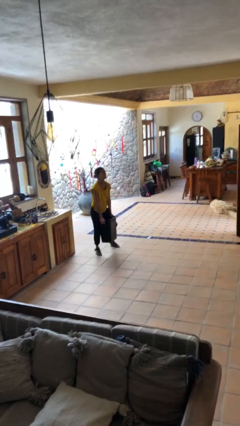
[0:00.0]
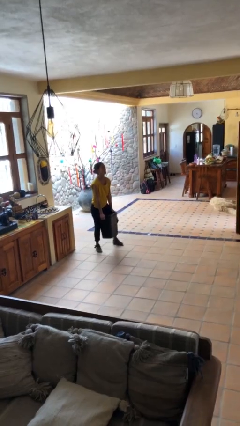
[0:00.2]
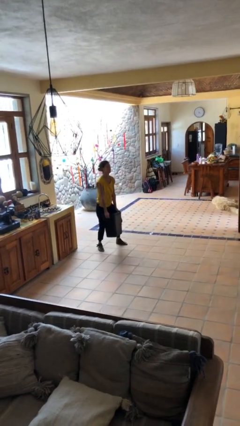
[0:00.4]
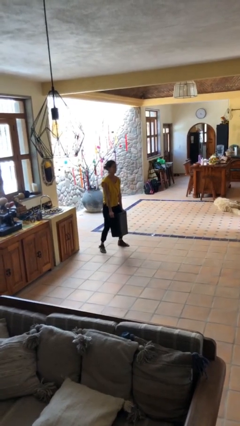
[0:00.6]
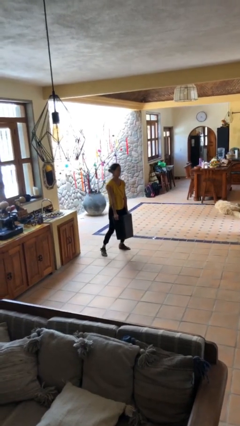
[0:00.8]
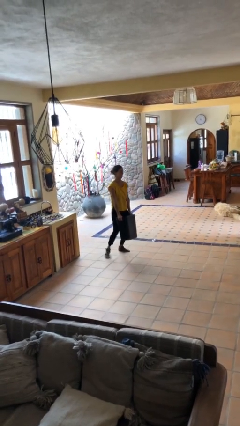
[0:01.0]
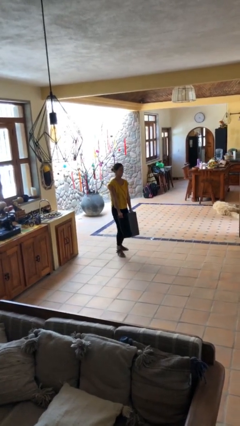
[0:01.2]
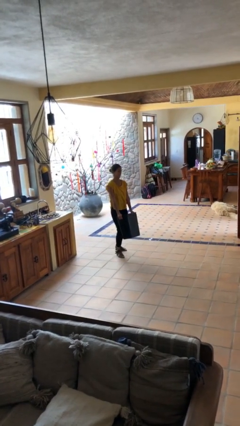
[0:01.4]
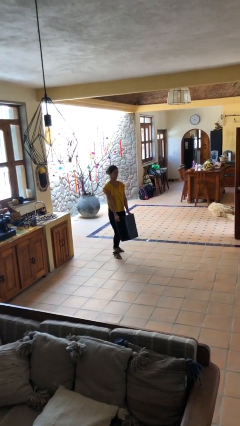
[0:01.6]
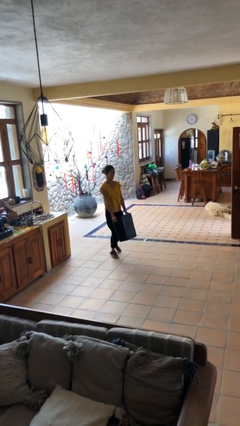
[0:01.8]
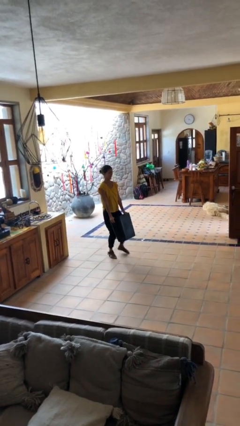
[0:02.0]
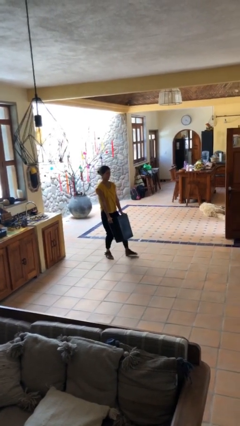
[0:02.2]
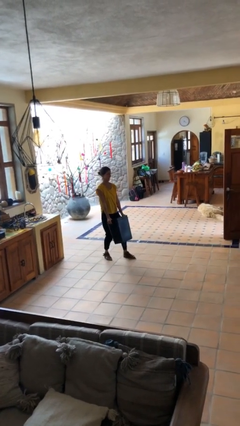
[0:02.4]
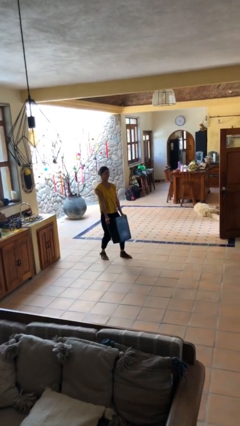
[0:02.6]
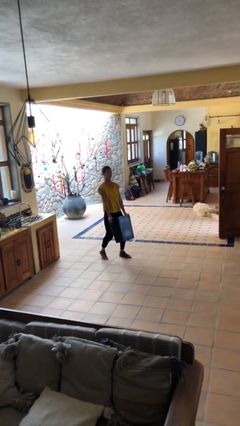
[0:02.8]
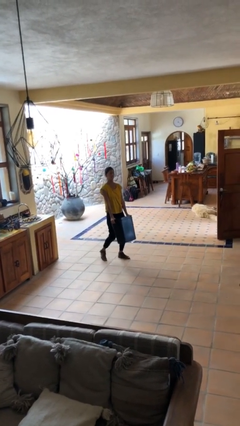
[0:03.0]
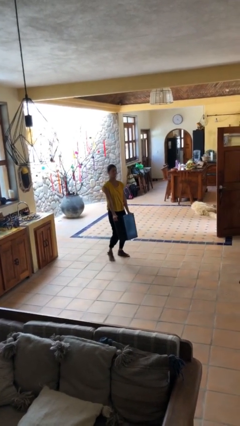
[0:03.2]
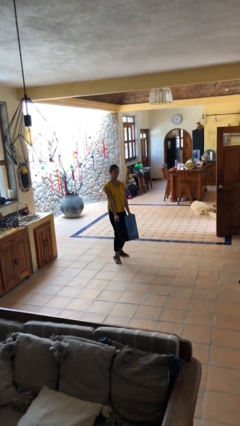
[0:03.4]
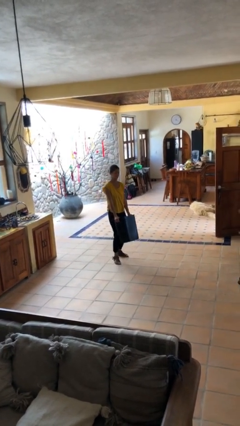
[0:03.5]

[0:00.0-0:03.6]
person carries heavy object

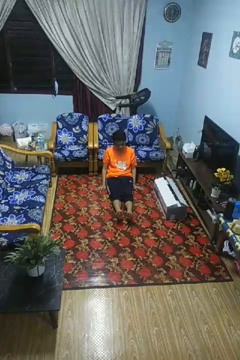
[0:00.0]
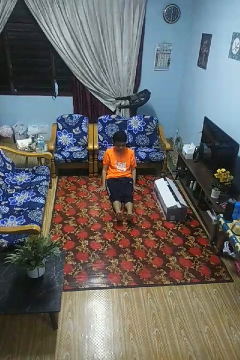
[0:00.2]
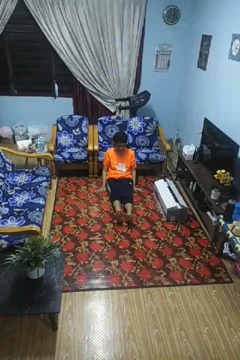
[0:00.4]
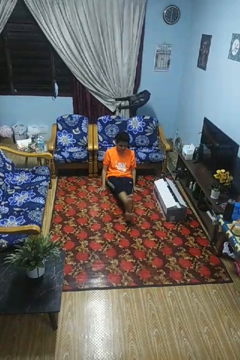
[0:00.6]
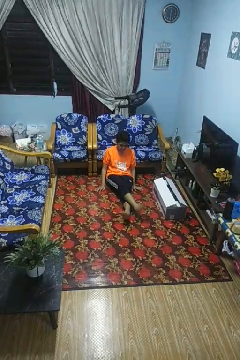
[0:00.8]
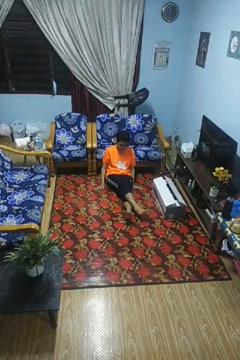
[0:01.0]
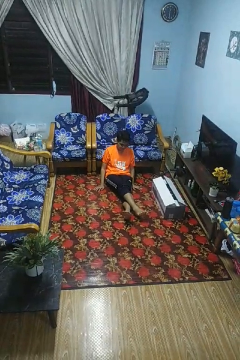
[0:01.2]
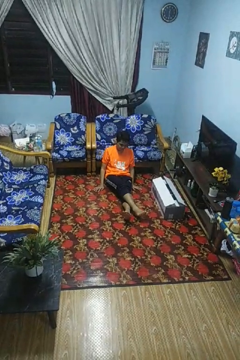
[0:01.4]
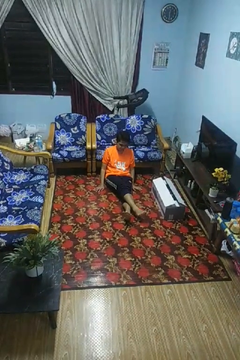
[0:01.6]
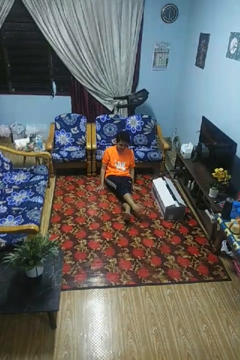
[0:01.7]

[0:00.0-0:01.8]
person crosses legs

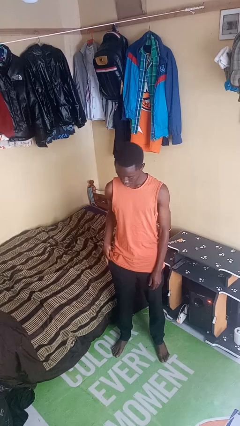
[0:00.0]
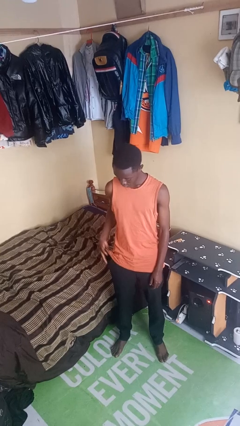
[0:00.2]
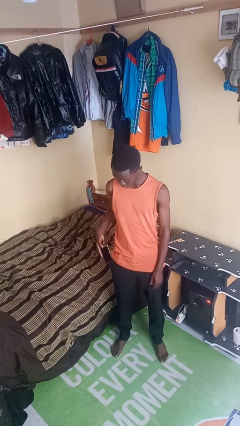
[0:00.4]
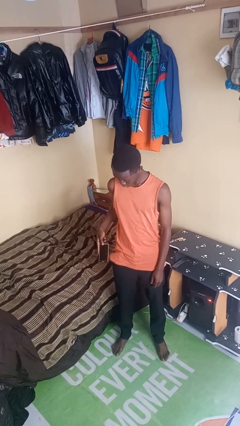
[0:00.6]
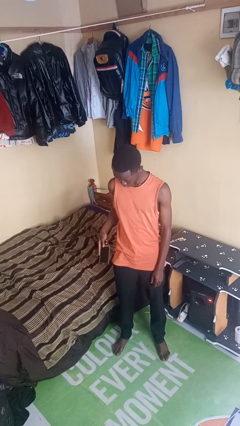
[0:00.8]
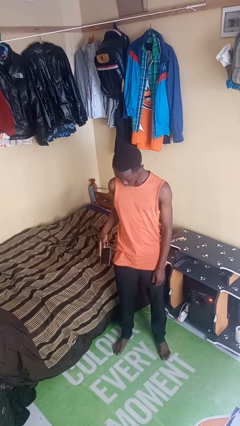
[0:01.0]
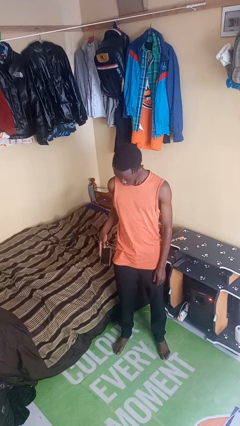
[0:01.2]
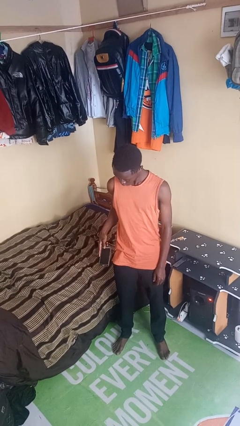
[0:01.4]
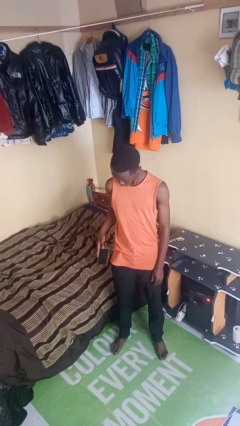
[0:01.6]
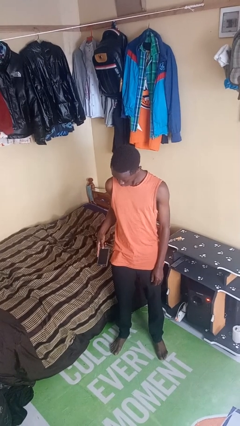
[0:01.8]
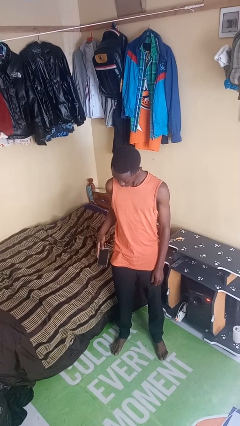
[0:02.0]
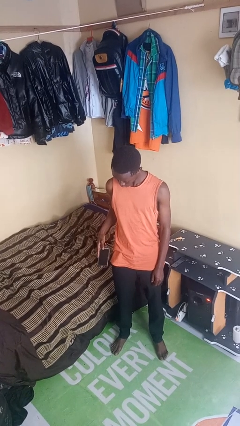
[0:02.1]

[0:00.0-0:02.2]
person takes phone from pocket

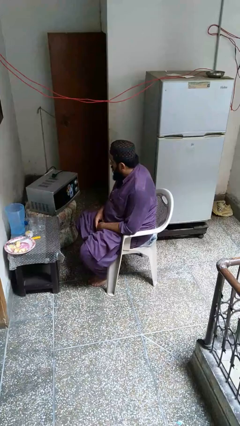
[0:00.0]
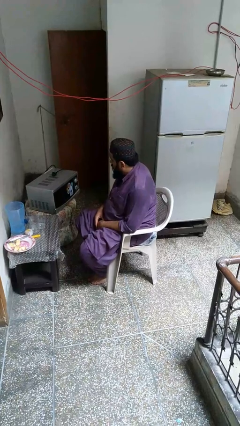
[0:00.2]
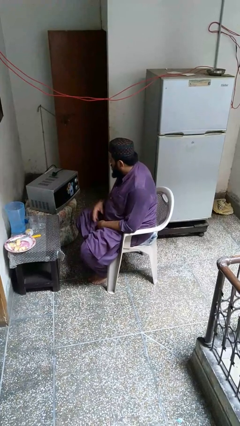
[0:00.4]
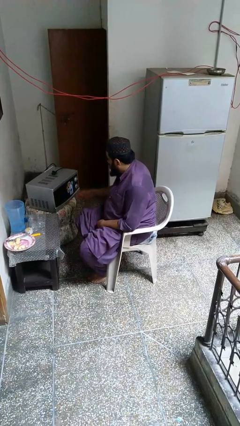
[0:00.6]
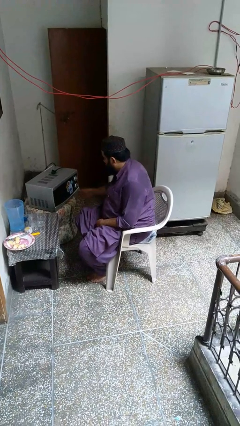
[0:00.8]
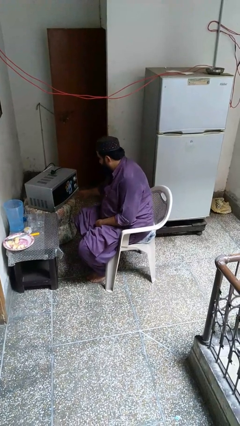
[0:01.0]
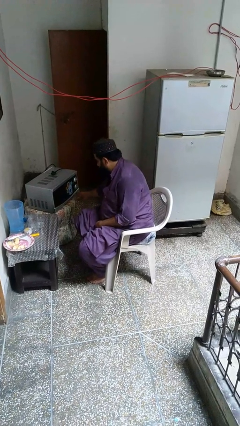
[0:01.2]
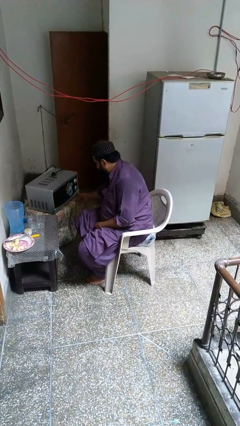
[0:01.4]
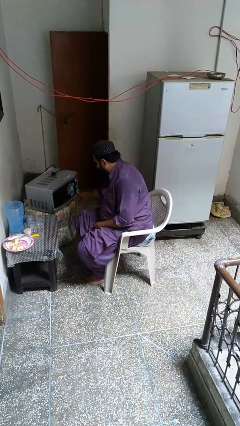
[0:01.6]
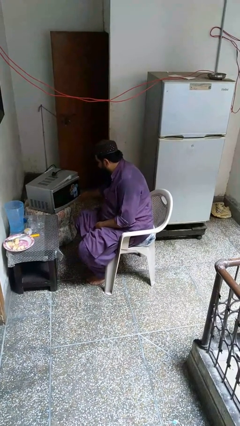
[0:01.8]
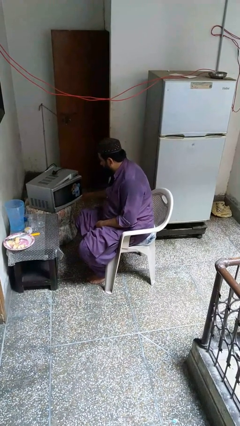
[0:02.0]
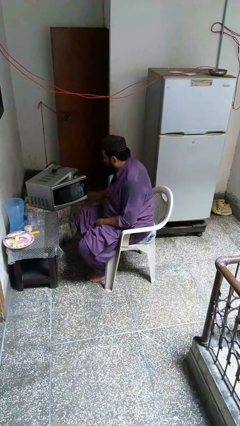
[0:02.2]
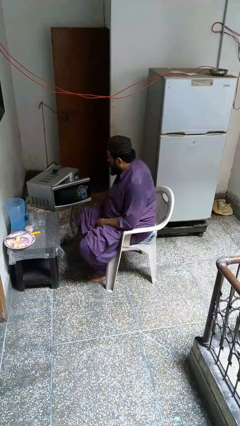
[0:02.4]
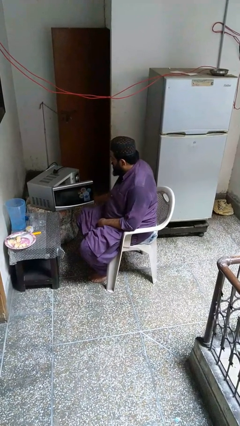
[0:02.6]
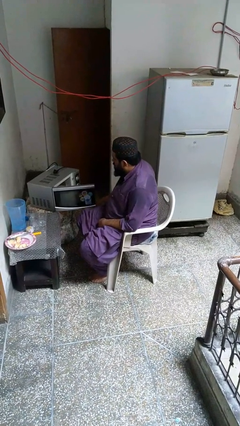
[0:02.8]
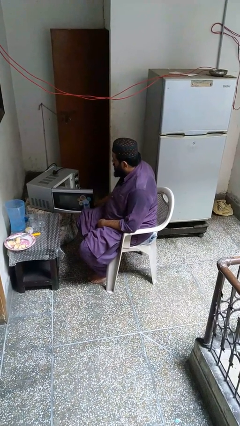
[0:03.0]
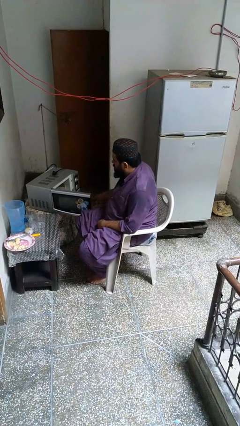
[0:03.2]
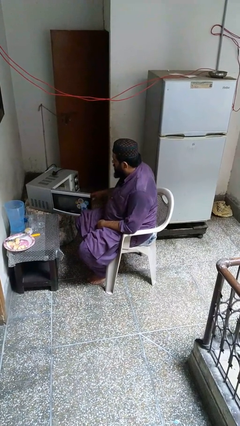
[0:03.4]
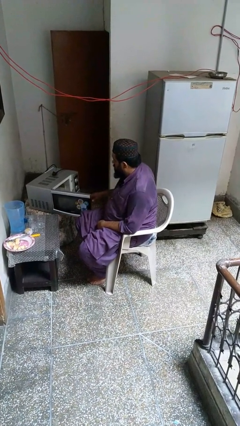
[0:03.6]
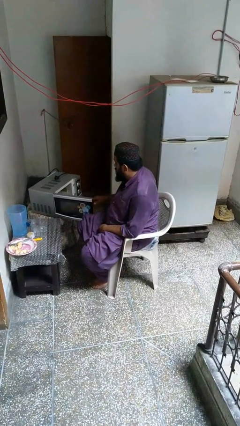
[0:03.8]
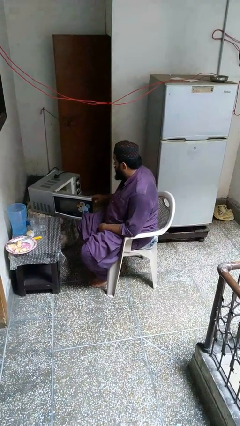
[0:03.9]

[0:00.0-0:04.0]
person opens microwave

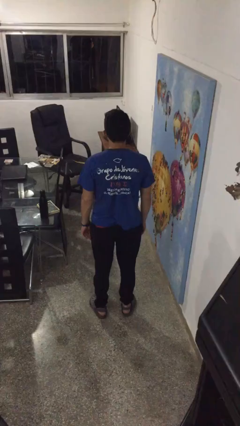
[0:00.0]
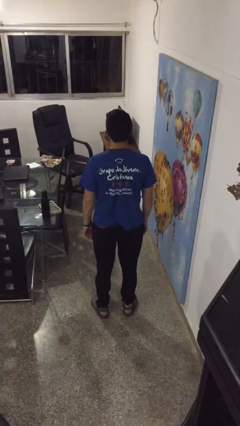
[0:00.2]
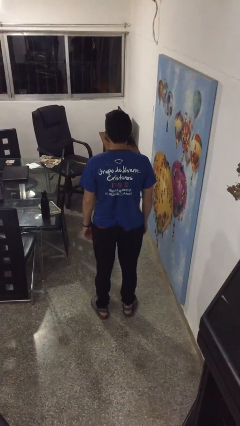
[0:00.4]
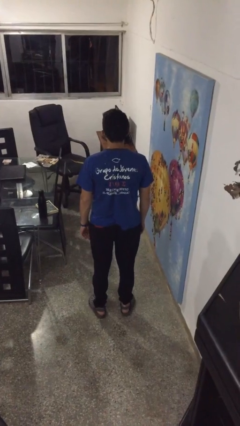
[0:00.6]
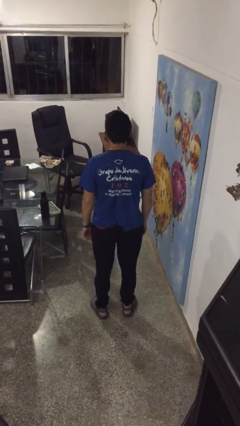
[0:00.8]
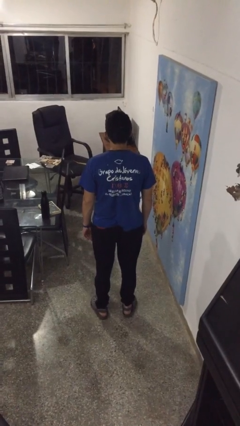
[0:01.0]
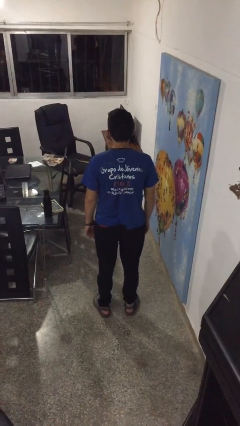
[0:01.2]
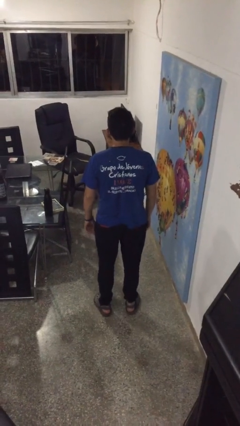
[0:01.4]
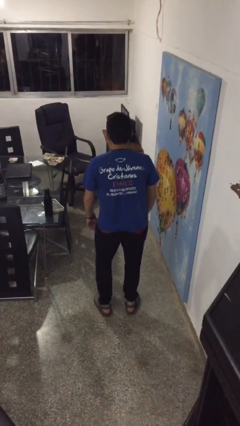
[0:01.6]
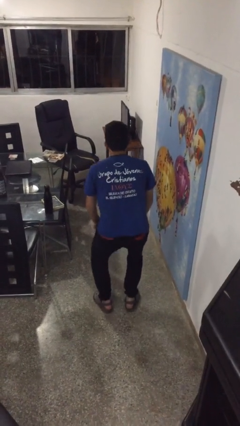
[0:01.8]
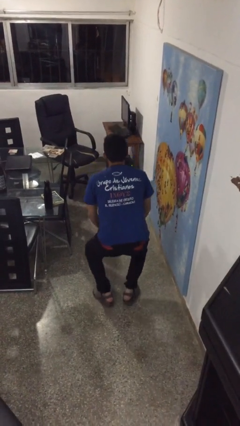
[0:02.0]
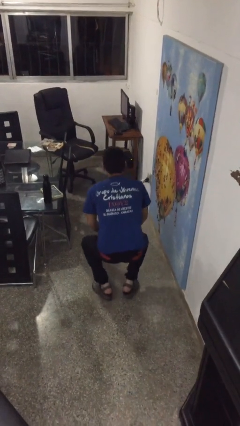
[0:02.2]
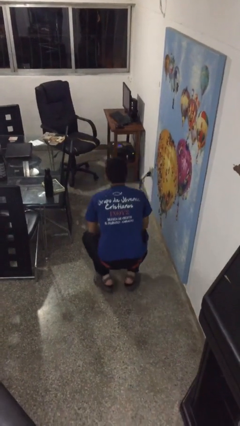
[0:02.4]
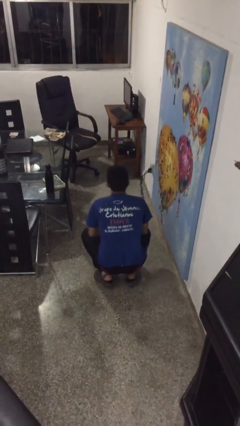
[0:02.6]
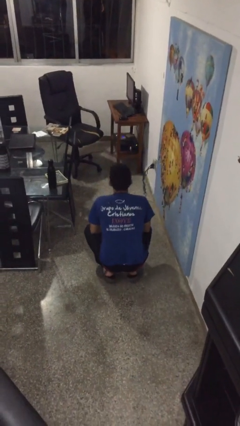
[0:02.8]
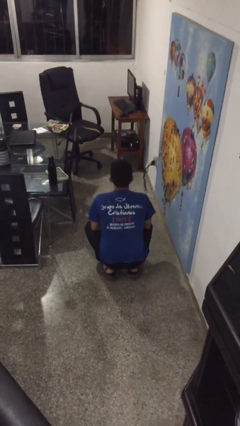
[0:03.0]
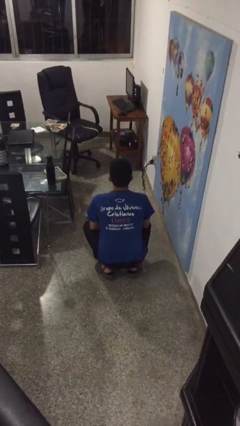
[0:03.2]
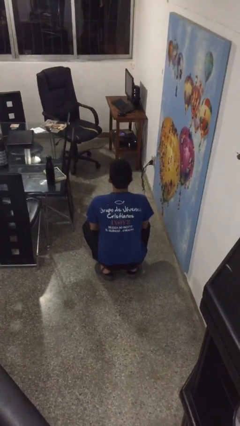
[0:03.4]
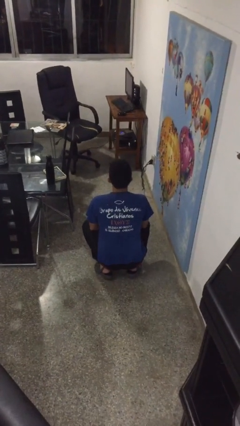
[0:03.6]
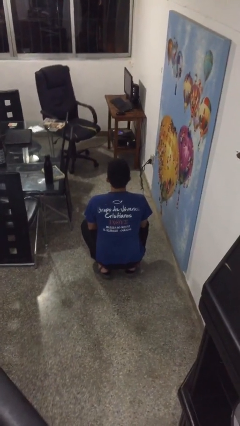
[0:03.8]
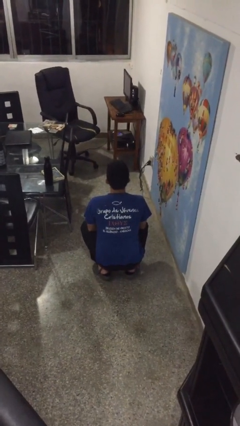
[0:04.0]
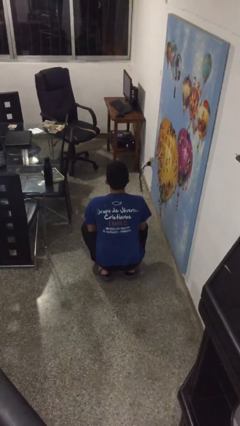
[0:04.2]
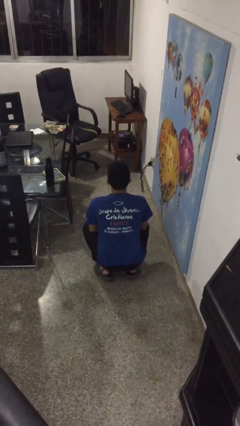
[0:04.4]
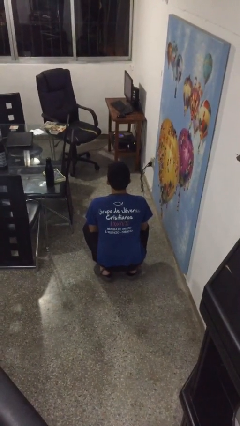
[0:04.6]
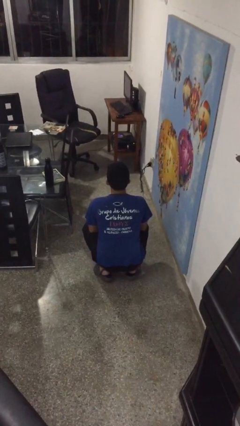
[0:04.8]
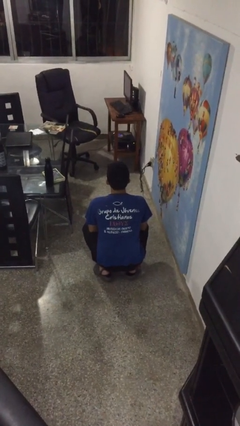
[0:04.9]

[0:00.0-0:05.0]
person squats

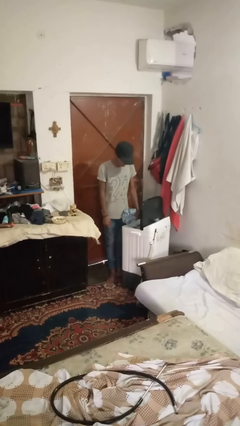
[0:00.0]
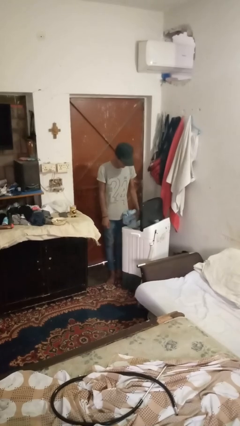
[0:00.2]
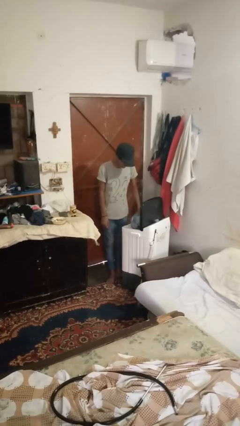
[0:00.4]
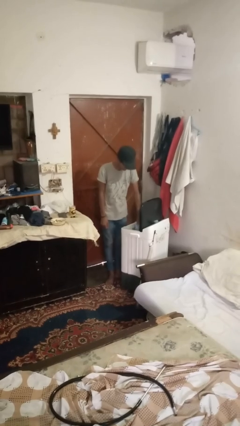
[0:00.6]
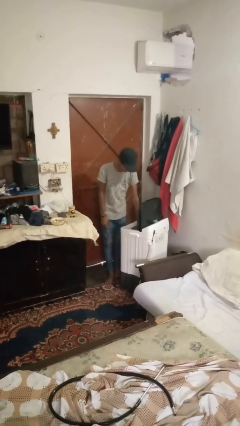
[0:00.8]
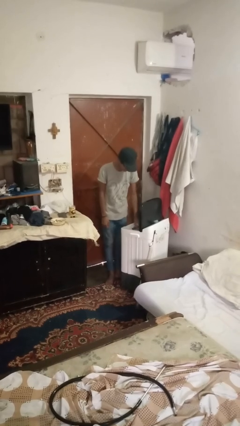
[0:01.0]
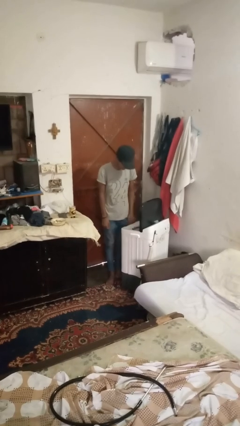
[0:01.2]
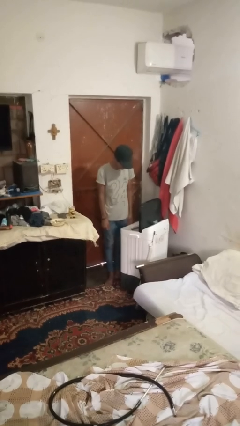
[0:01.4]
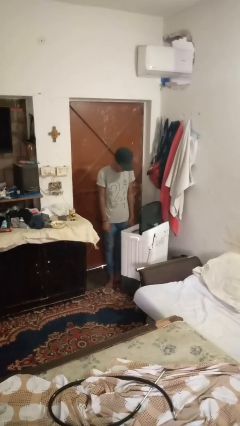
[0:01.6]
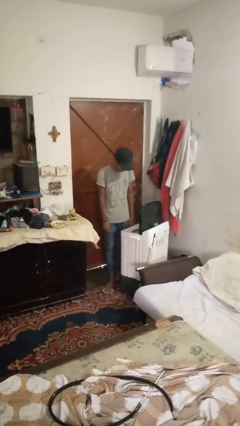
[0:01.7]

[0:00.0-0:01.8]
person loads clotheswasher
